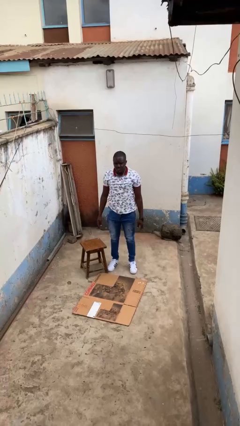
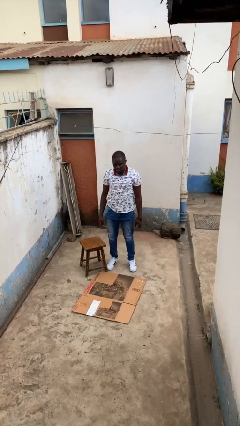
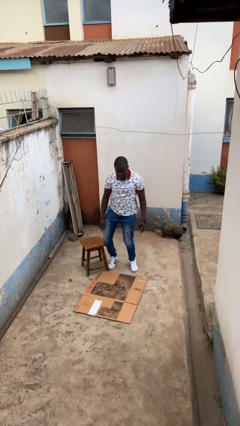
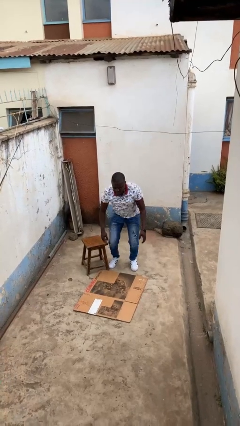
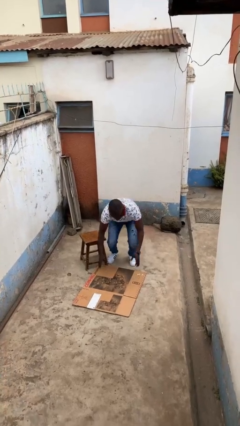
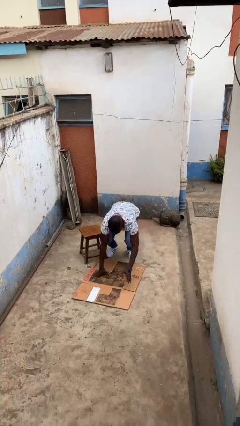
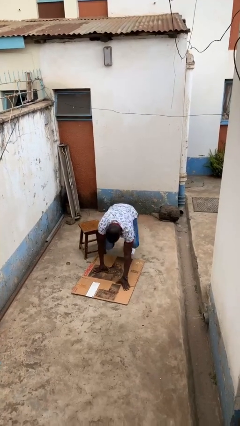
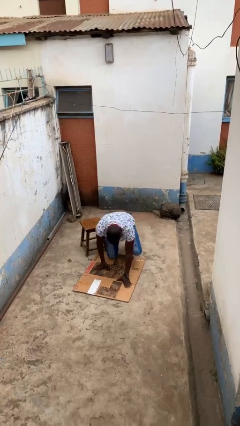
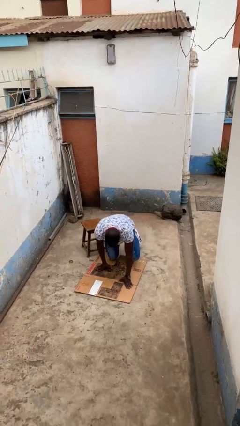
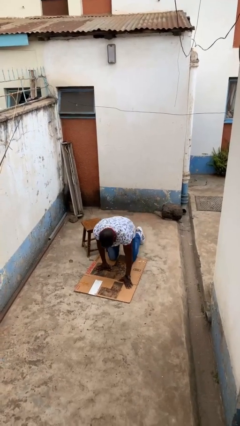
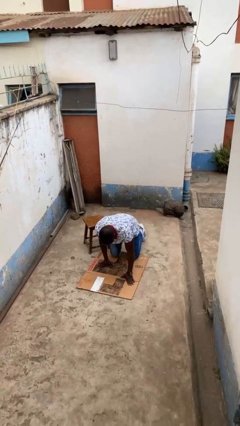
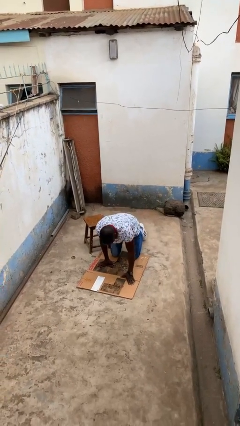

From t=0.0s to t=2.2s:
person trips on object on floor

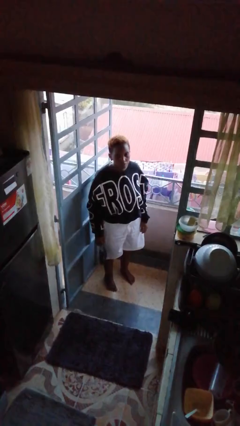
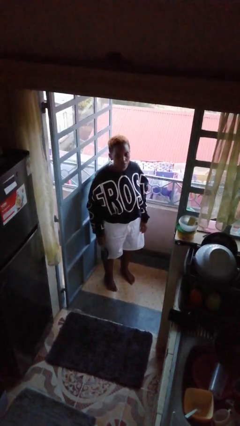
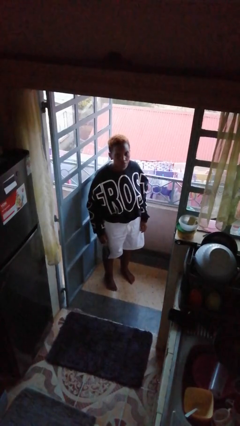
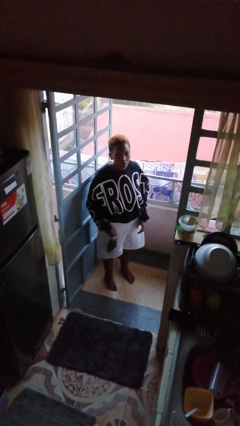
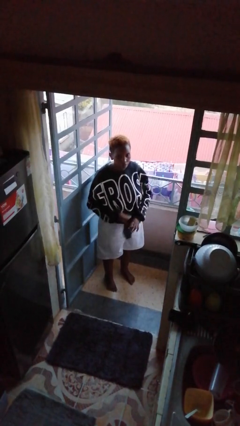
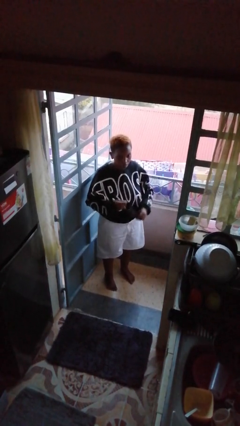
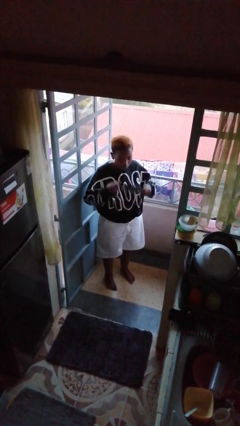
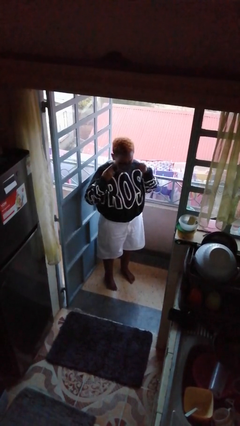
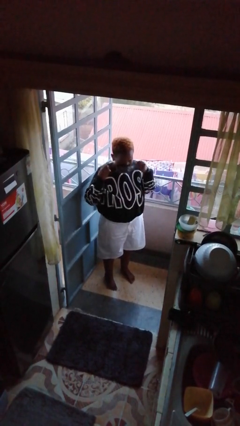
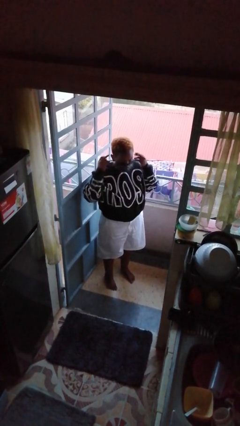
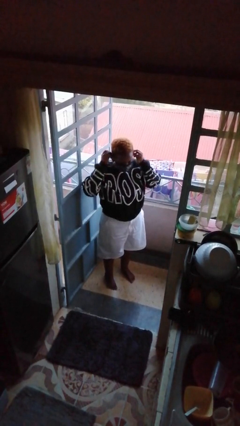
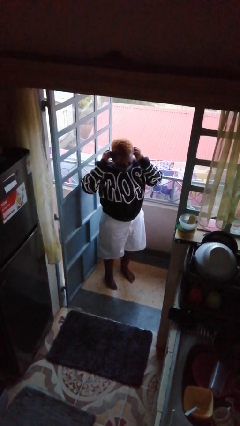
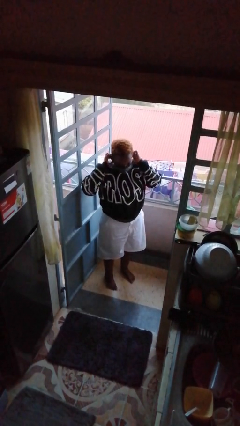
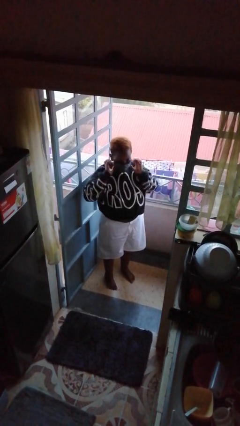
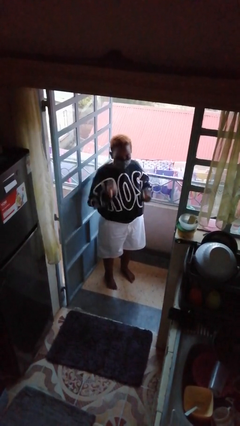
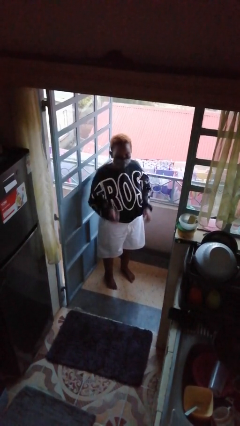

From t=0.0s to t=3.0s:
person puts on facemask

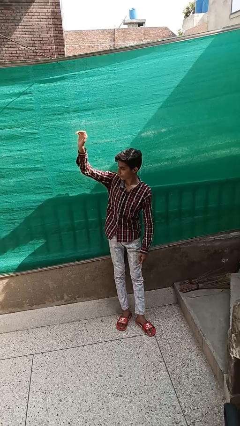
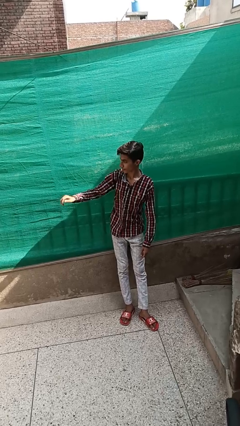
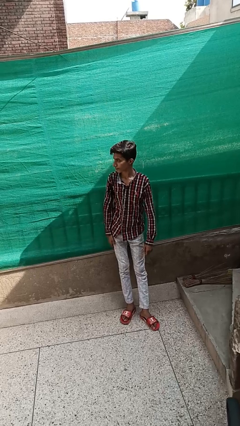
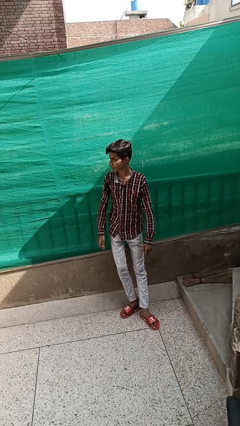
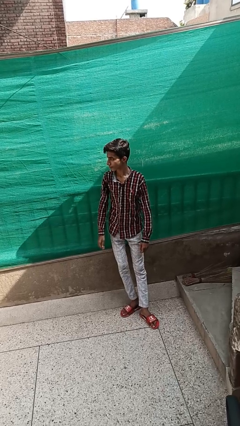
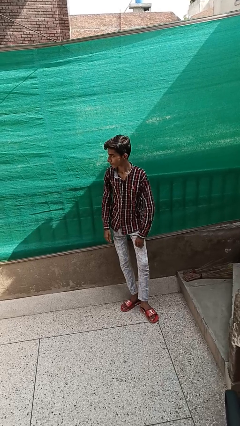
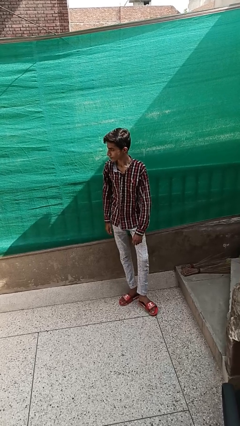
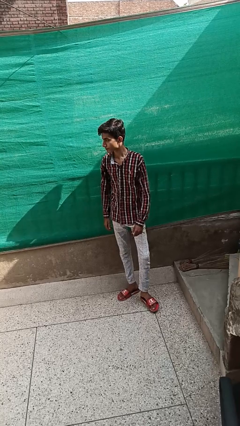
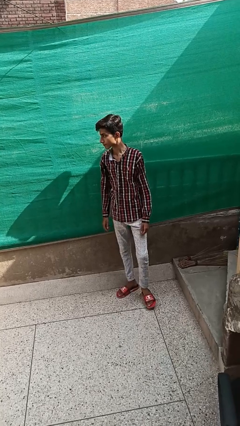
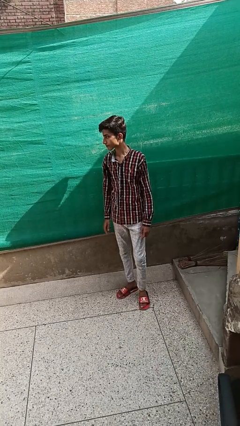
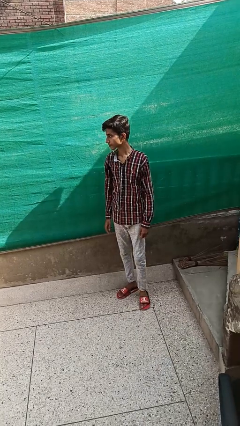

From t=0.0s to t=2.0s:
person gestures lower hand

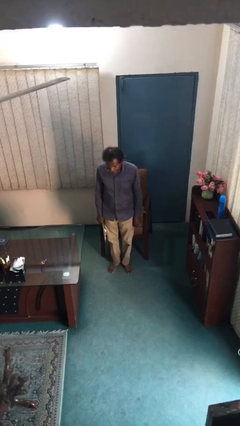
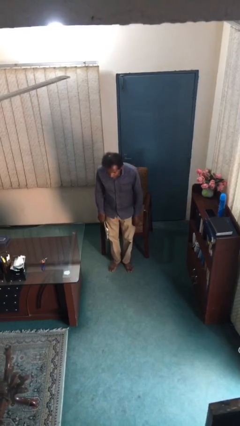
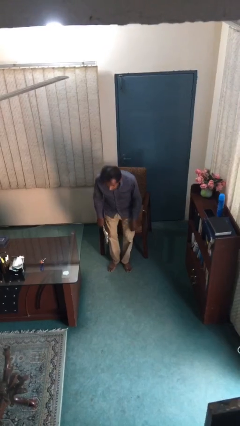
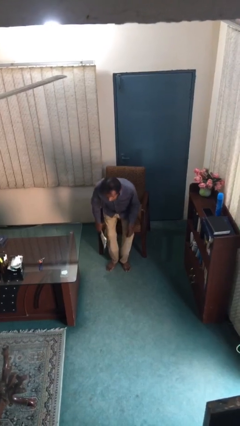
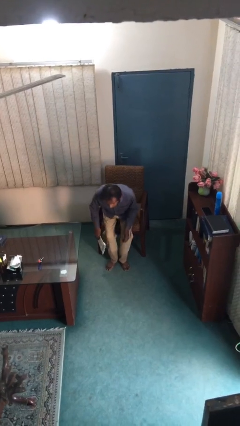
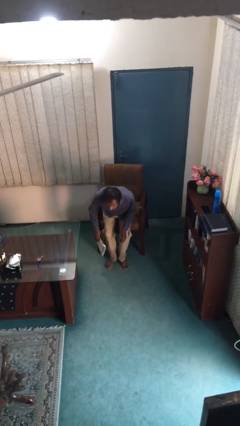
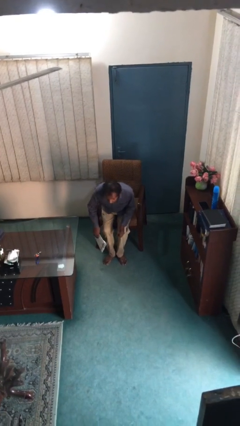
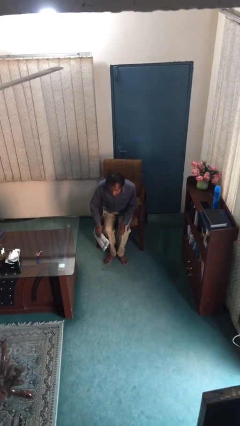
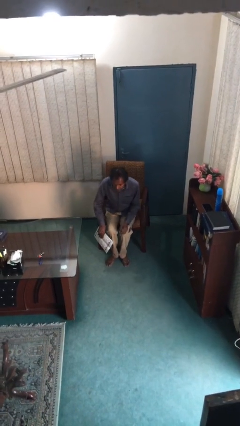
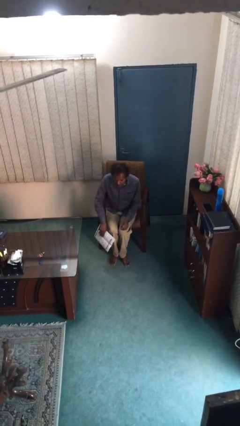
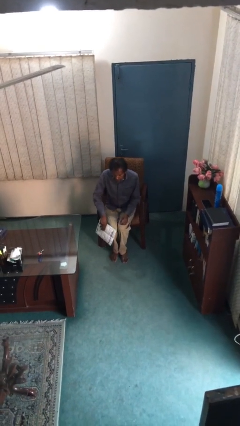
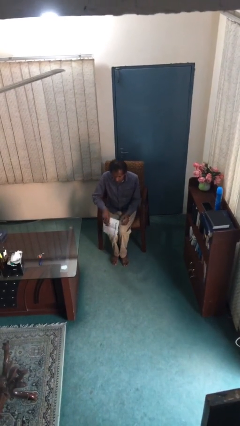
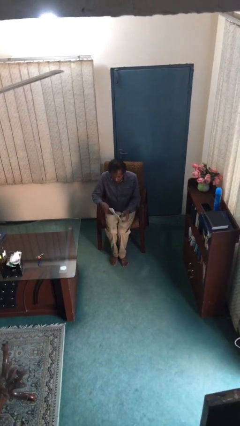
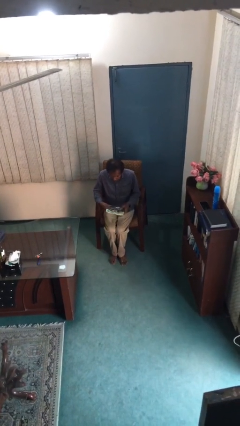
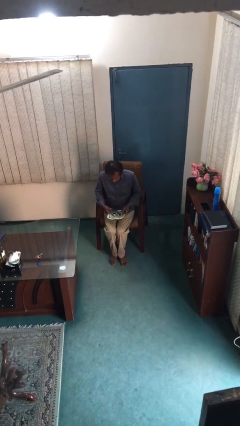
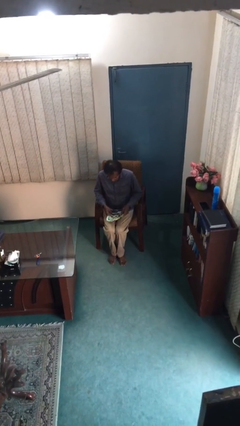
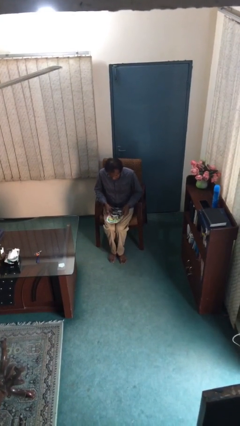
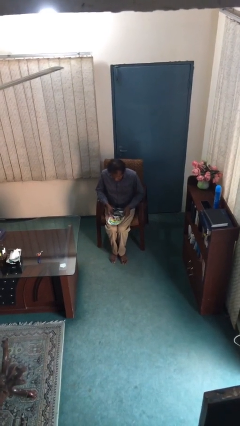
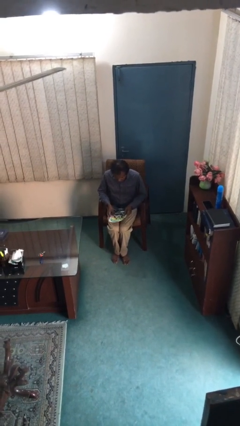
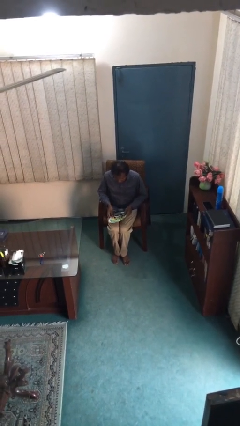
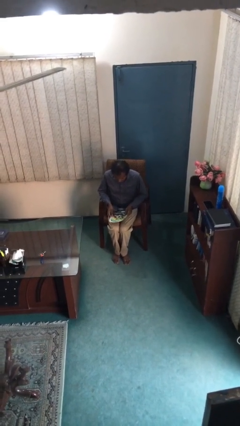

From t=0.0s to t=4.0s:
person sits down

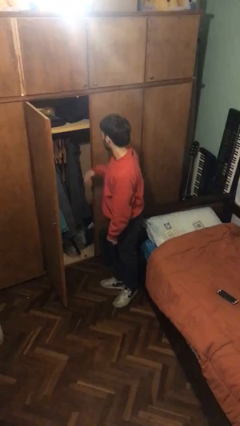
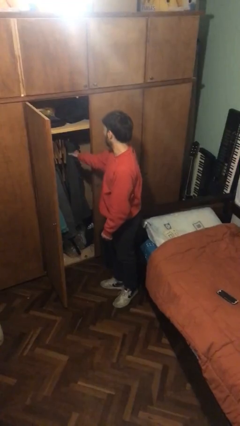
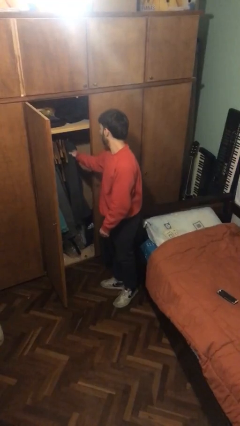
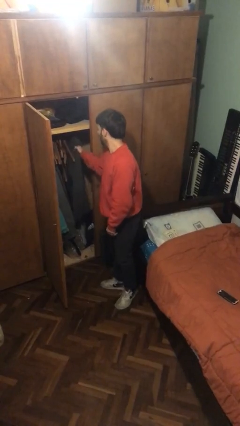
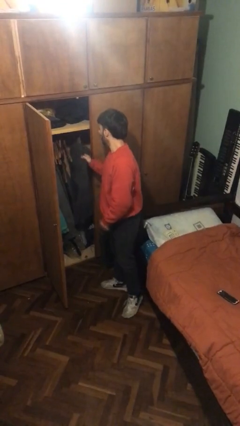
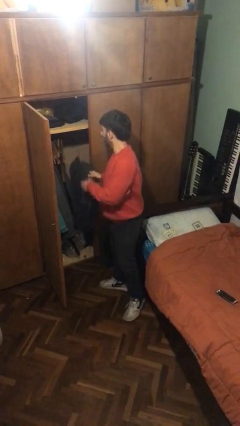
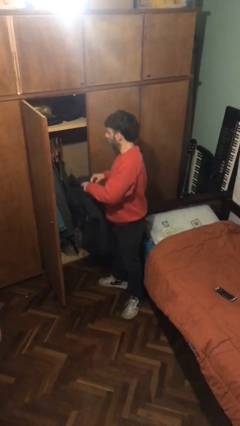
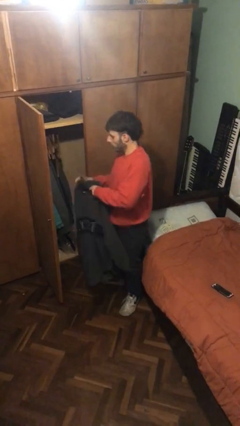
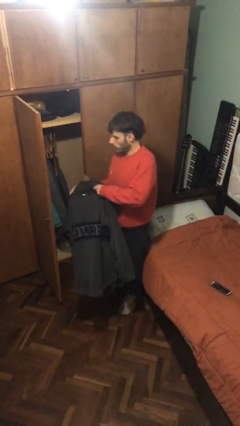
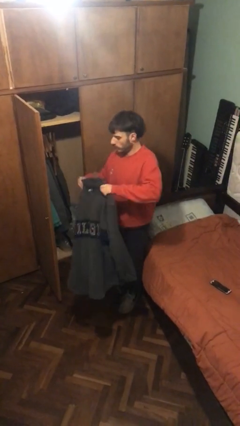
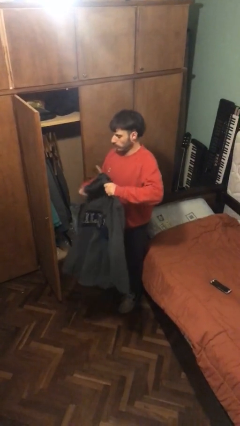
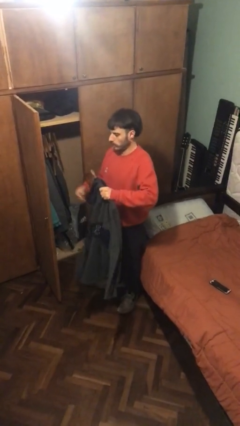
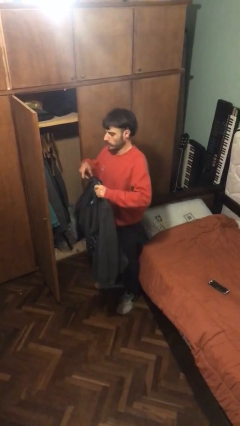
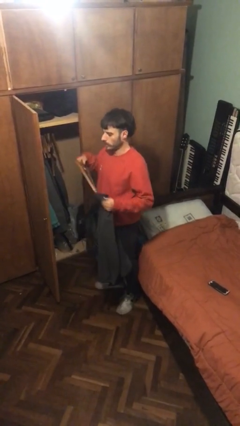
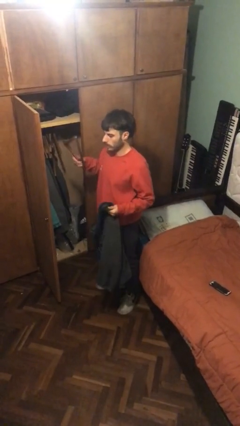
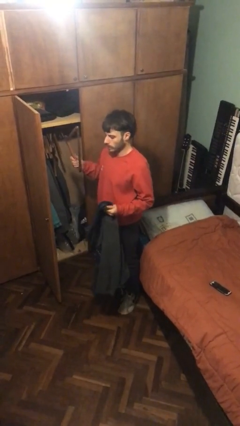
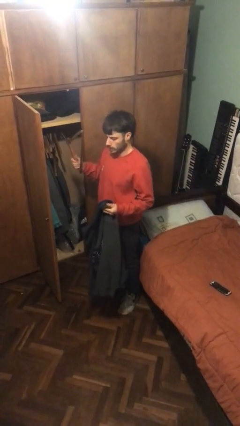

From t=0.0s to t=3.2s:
person takes clothes from closet

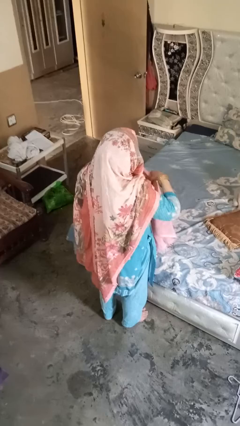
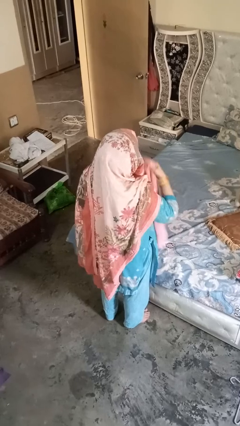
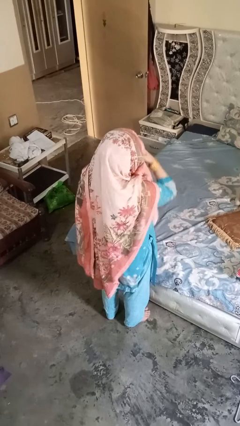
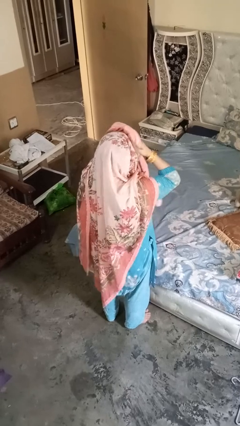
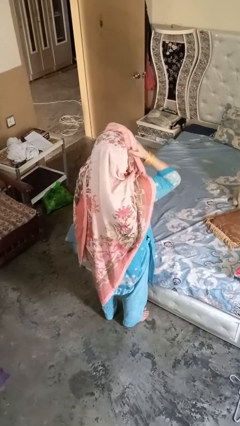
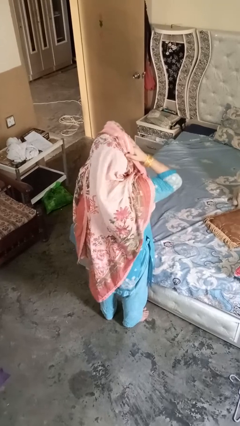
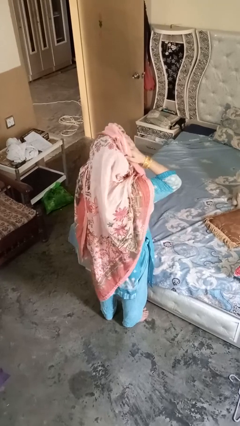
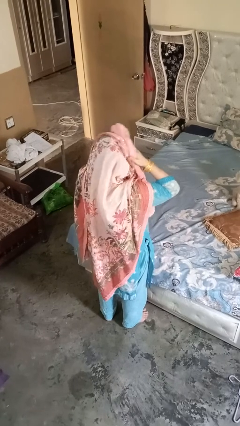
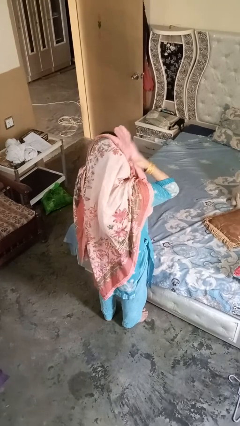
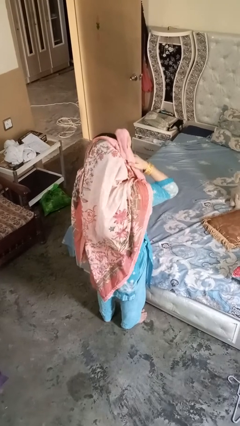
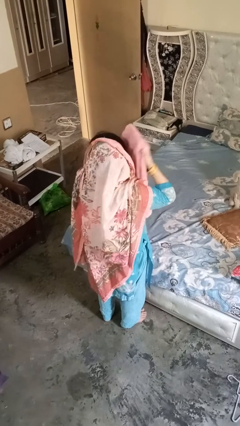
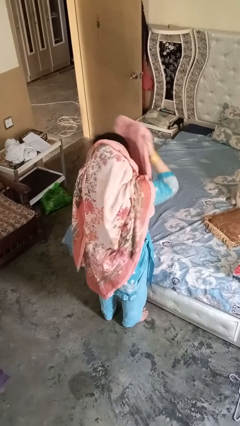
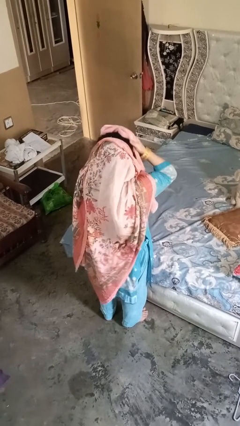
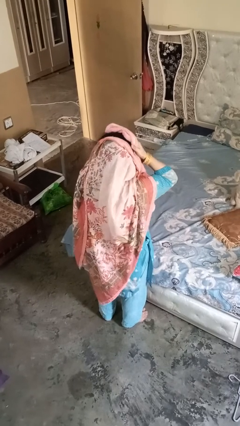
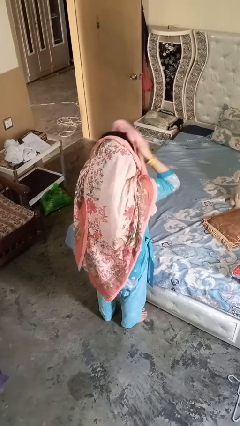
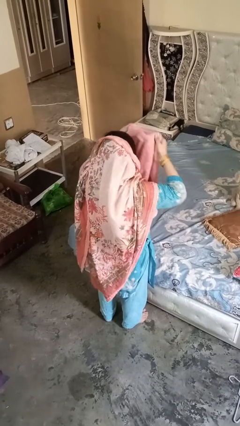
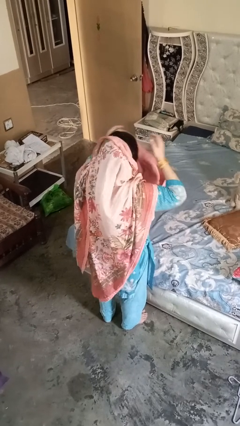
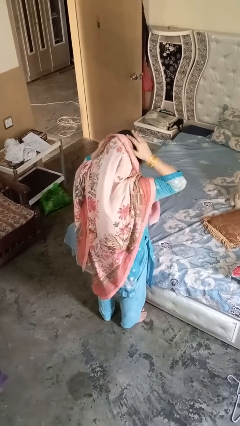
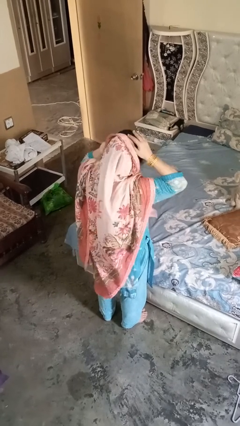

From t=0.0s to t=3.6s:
person dries hair with towel
